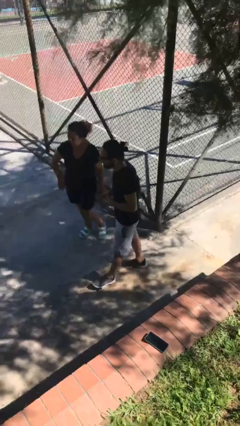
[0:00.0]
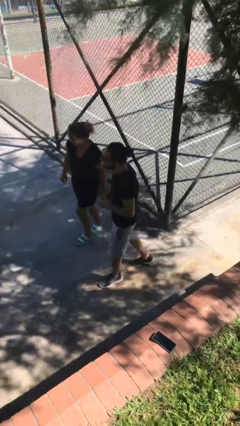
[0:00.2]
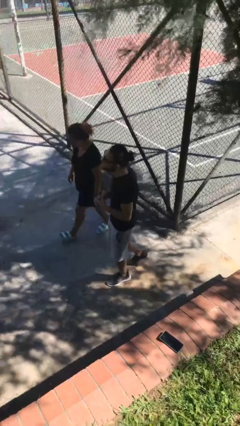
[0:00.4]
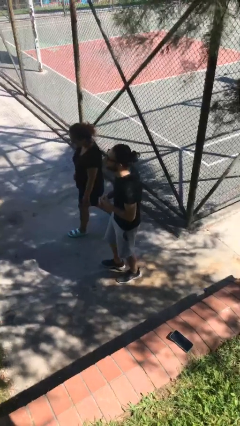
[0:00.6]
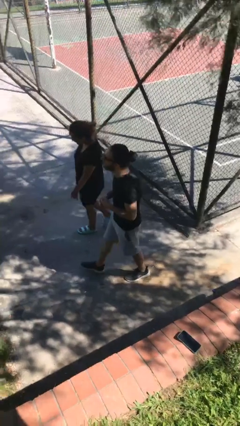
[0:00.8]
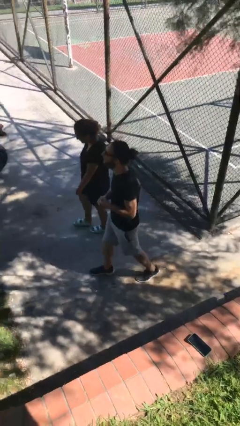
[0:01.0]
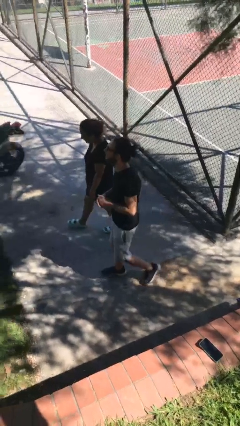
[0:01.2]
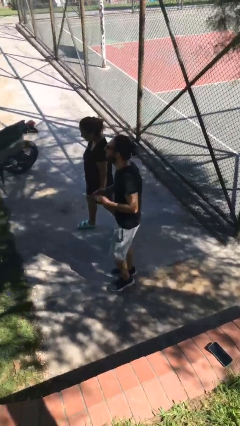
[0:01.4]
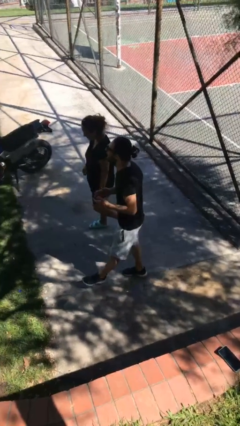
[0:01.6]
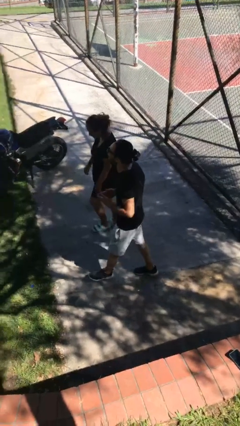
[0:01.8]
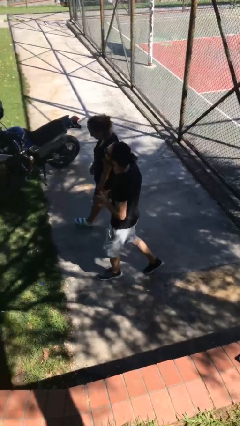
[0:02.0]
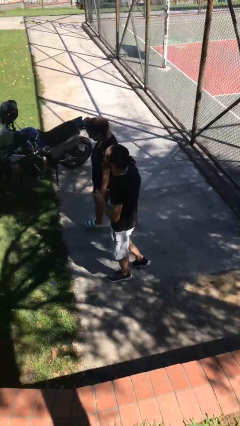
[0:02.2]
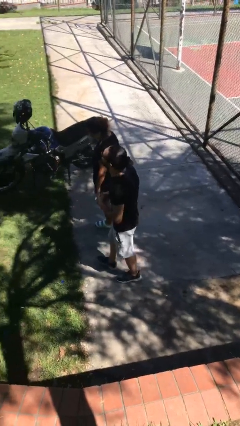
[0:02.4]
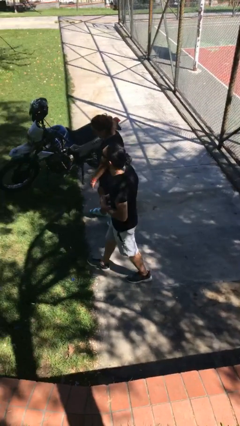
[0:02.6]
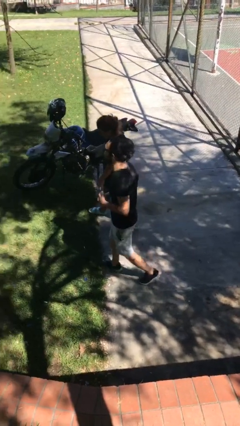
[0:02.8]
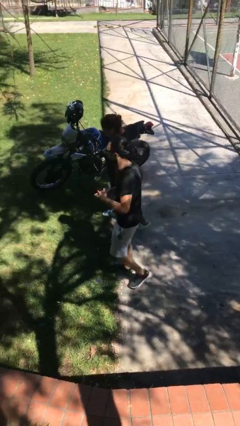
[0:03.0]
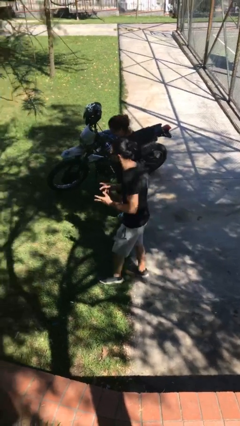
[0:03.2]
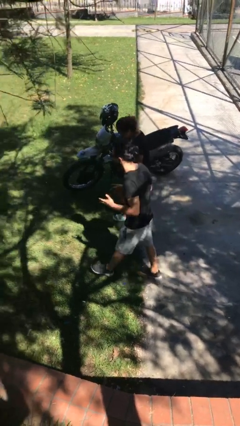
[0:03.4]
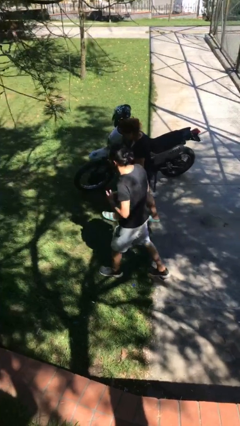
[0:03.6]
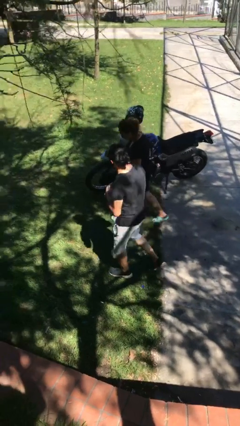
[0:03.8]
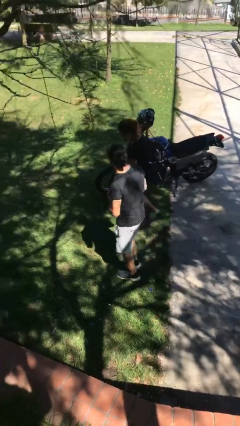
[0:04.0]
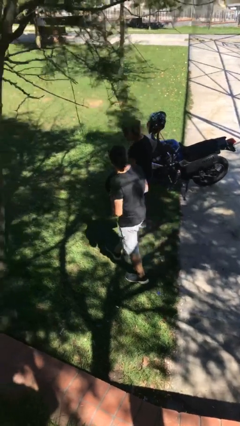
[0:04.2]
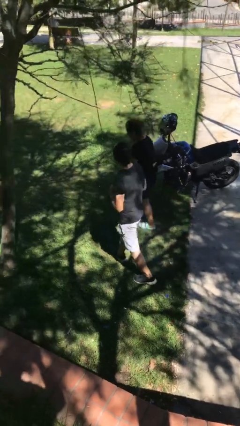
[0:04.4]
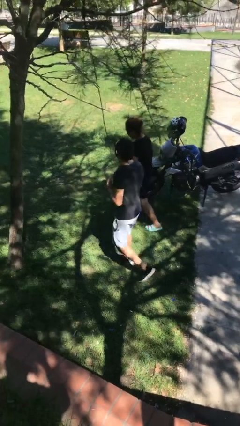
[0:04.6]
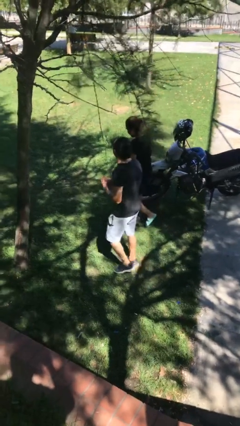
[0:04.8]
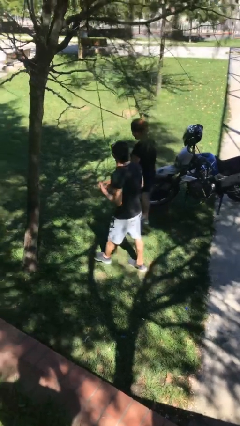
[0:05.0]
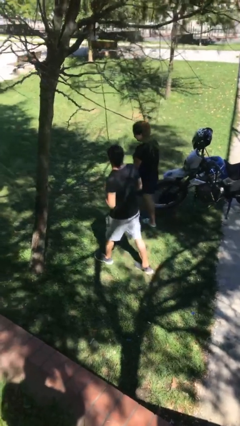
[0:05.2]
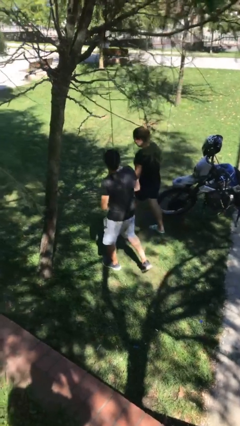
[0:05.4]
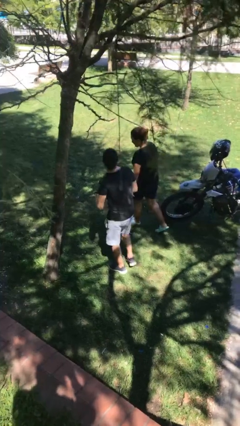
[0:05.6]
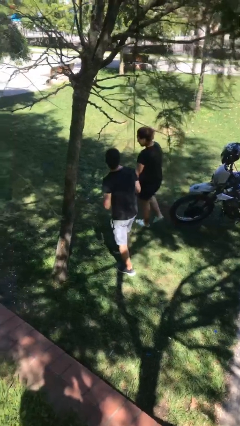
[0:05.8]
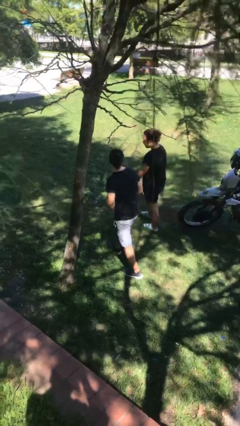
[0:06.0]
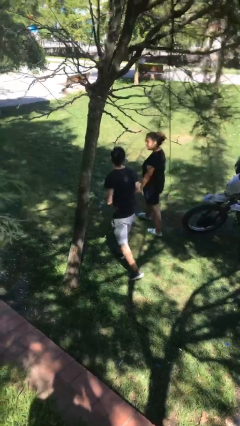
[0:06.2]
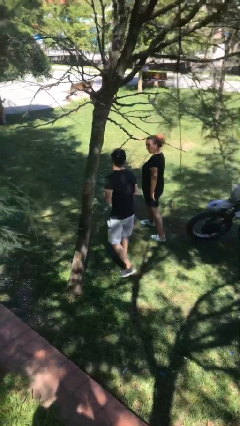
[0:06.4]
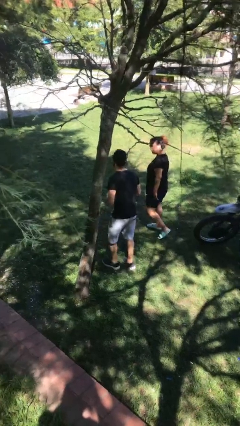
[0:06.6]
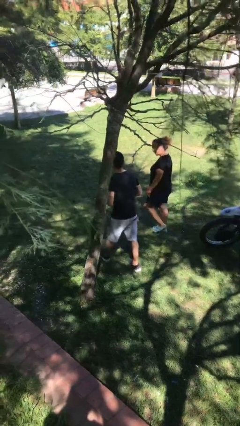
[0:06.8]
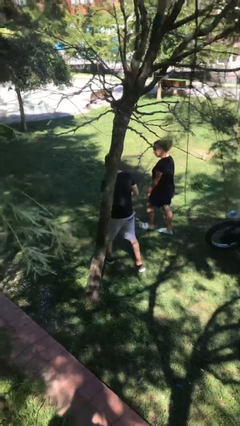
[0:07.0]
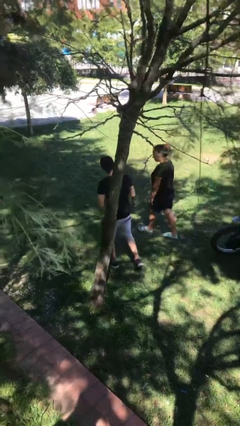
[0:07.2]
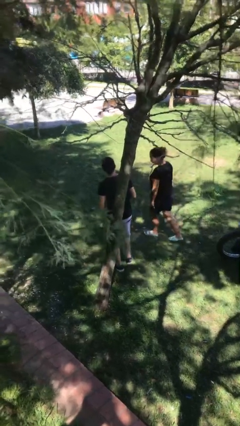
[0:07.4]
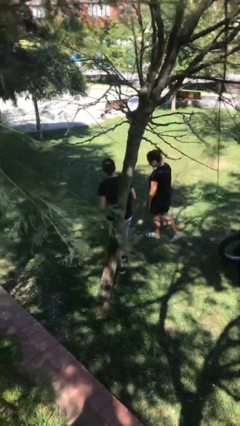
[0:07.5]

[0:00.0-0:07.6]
person talks to person

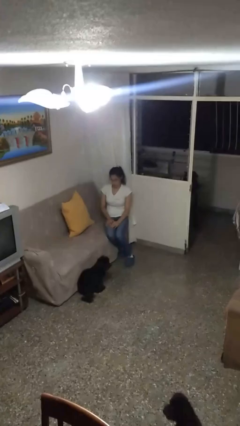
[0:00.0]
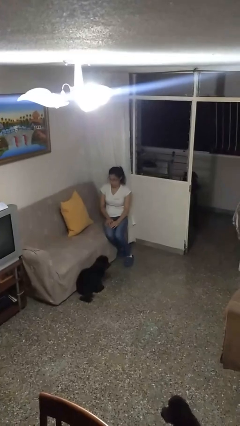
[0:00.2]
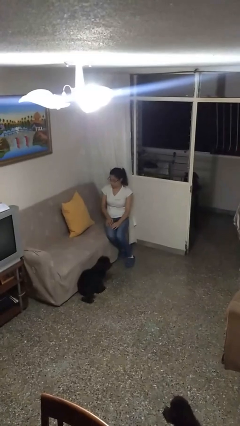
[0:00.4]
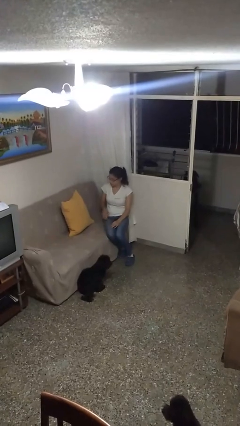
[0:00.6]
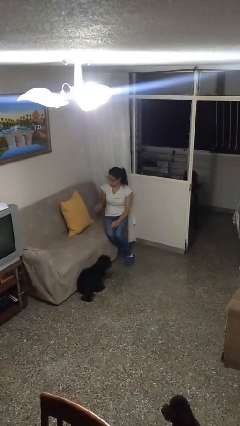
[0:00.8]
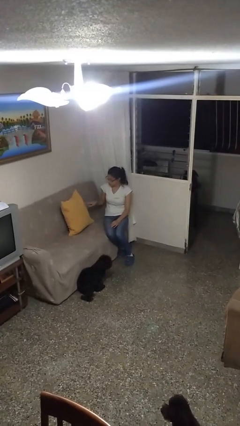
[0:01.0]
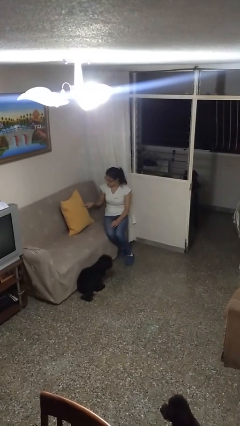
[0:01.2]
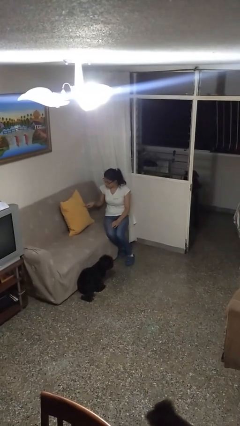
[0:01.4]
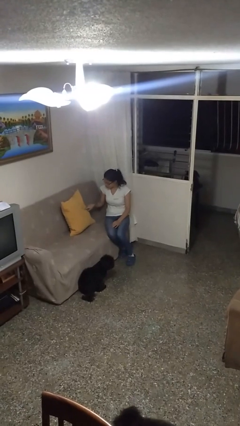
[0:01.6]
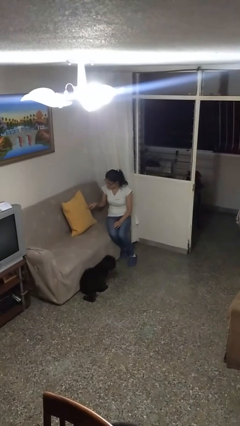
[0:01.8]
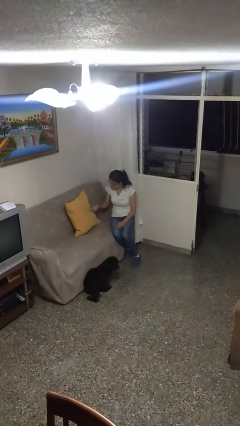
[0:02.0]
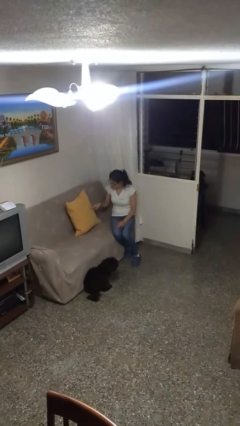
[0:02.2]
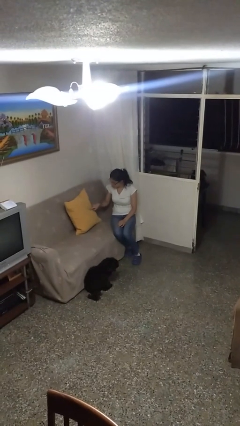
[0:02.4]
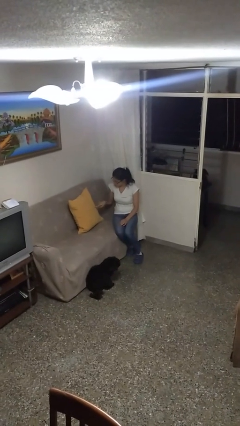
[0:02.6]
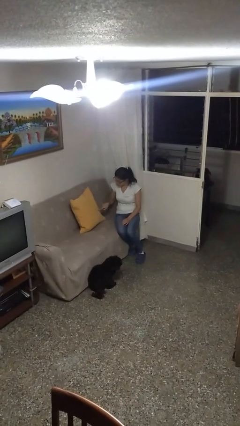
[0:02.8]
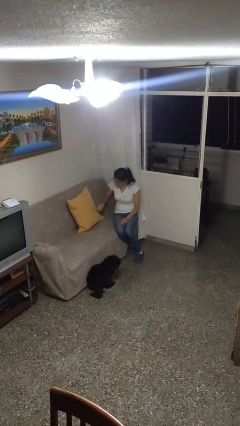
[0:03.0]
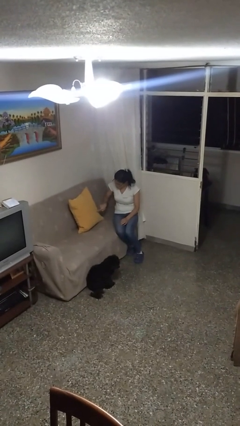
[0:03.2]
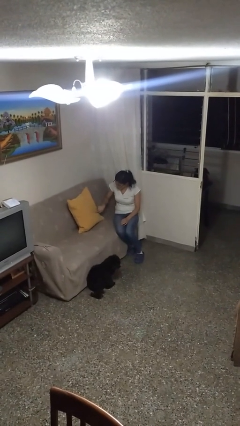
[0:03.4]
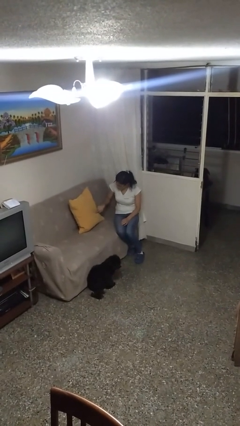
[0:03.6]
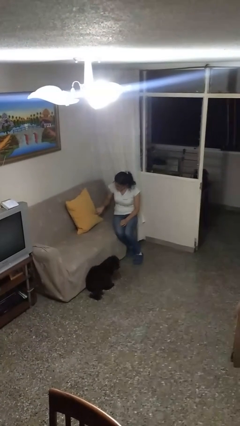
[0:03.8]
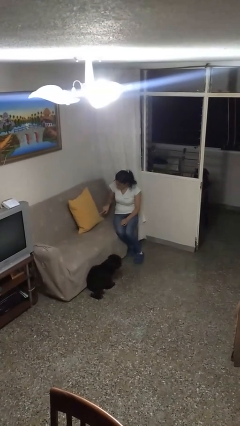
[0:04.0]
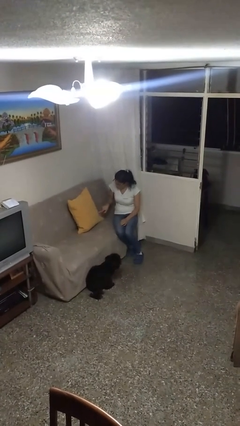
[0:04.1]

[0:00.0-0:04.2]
person taps object with finger

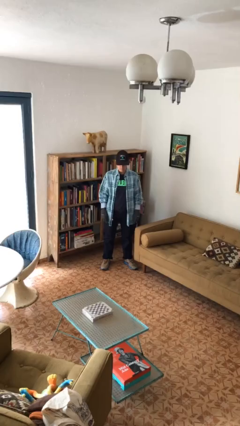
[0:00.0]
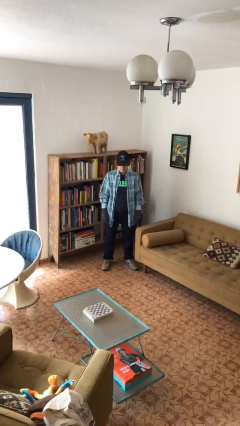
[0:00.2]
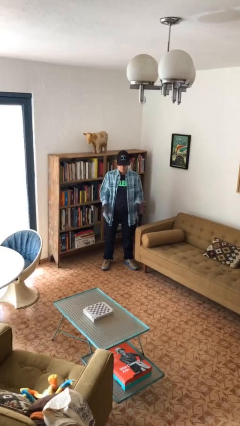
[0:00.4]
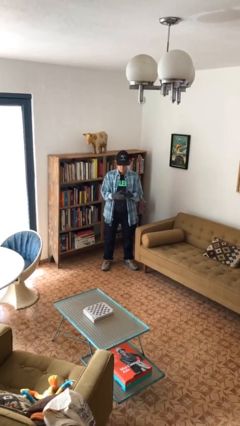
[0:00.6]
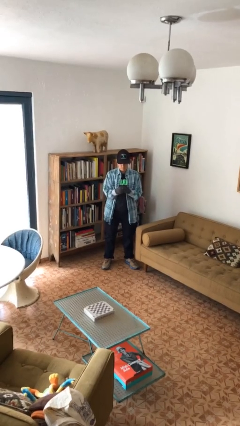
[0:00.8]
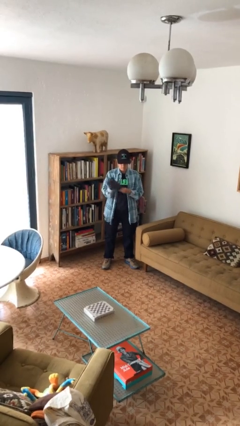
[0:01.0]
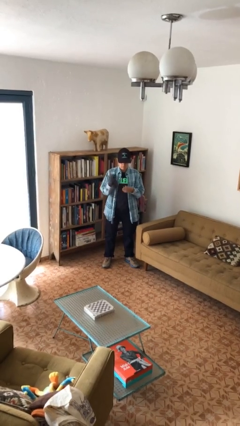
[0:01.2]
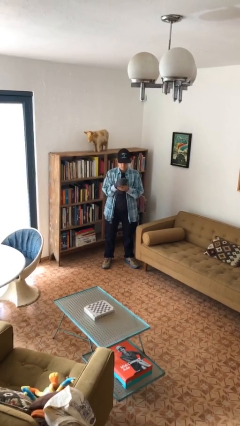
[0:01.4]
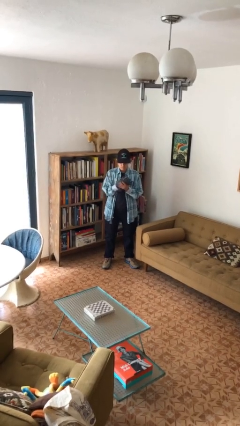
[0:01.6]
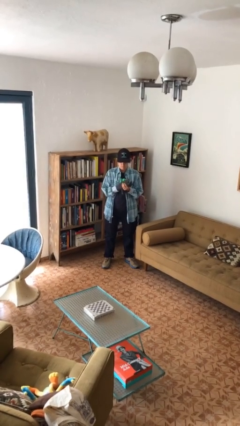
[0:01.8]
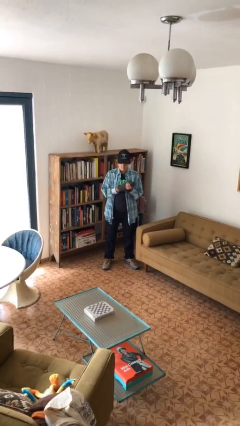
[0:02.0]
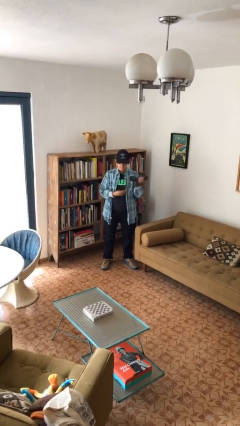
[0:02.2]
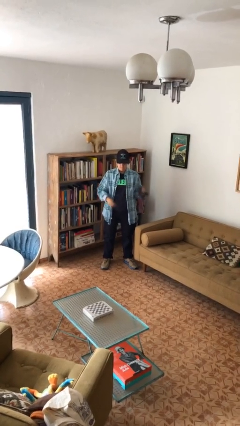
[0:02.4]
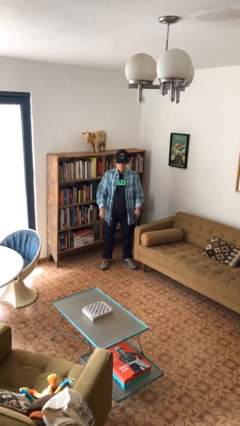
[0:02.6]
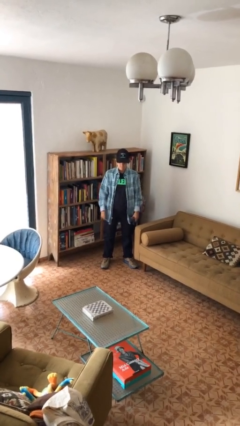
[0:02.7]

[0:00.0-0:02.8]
person takes off gloves

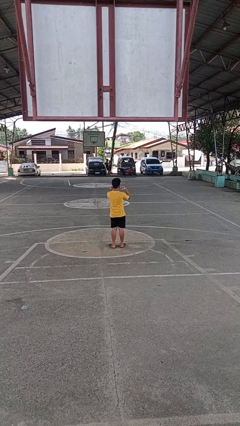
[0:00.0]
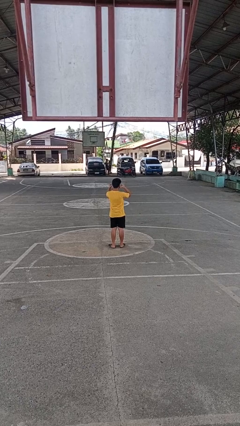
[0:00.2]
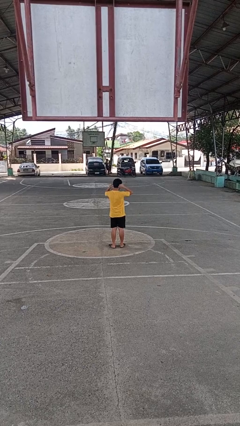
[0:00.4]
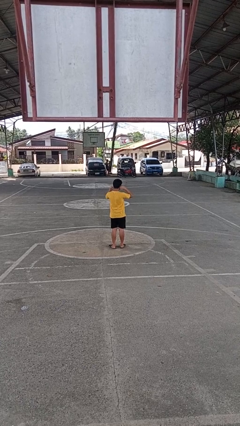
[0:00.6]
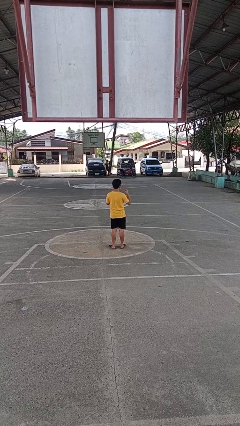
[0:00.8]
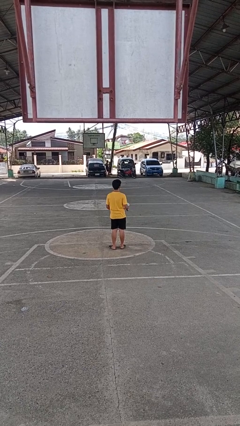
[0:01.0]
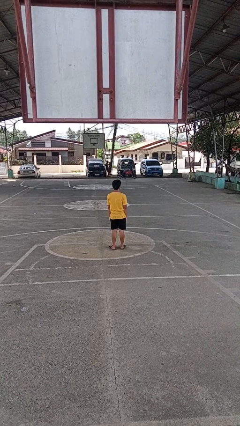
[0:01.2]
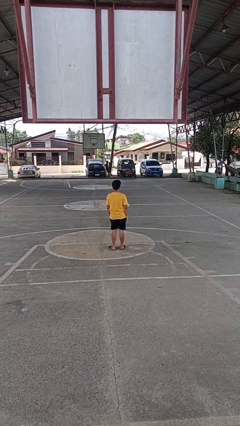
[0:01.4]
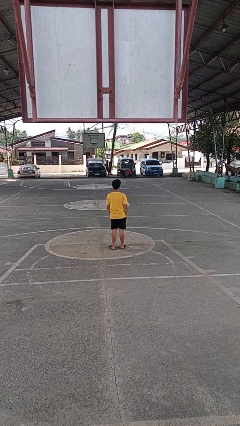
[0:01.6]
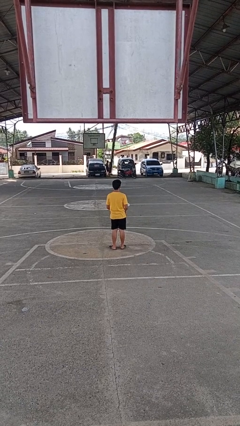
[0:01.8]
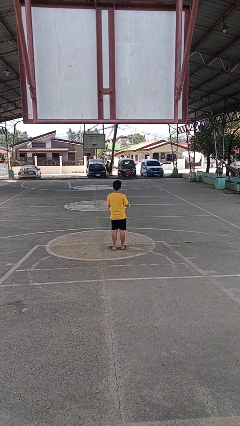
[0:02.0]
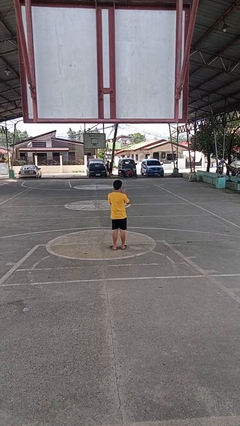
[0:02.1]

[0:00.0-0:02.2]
person puts on facemask

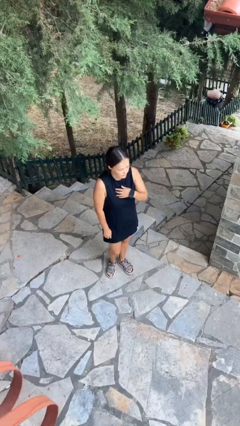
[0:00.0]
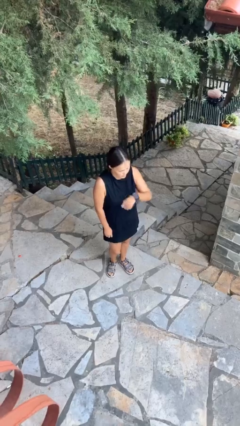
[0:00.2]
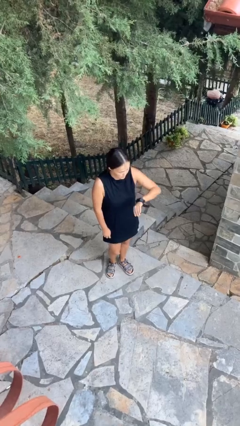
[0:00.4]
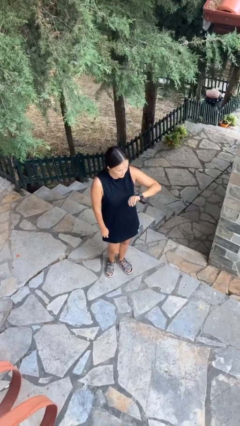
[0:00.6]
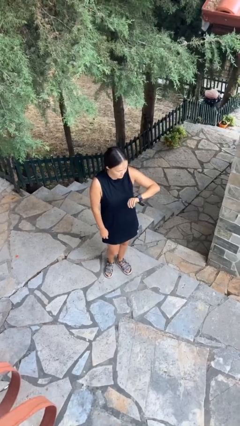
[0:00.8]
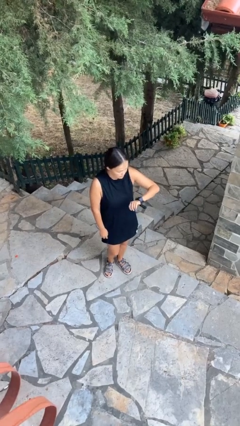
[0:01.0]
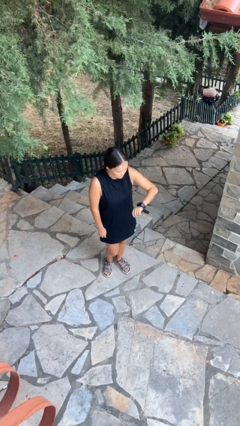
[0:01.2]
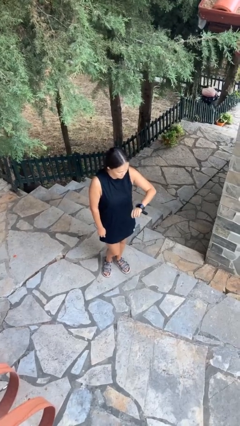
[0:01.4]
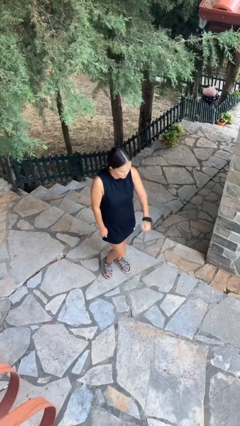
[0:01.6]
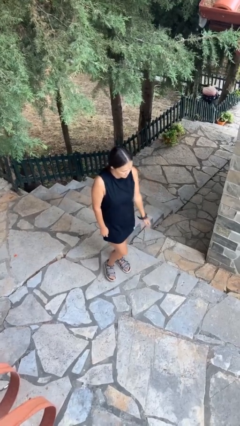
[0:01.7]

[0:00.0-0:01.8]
person looks at wristwatch
